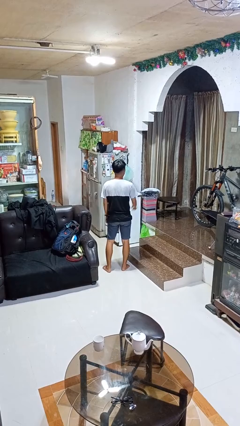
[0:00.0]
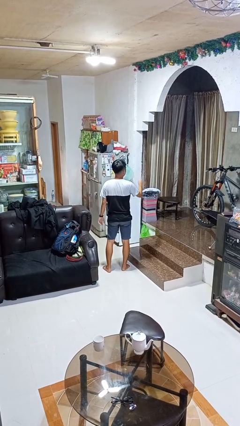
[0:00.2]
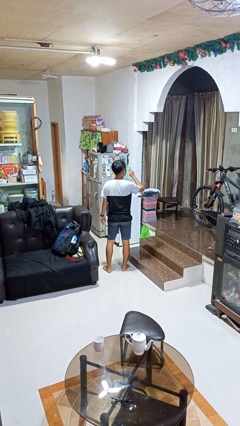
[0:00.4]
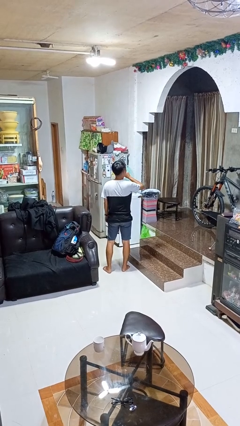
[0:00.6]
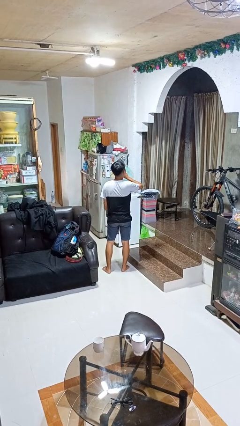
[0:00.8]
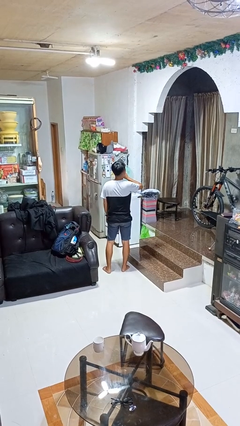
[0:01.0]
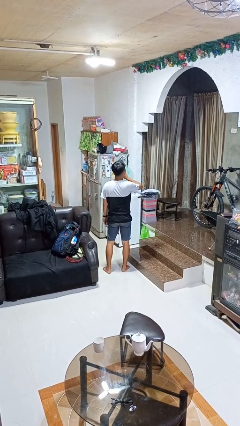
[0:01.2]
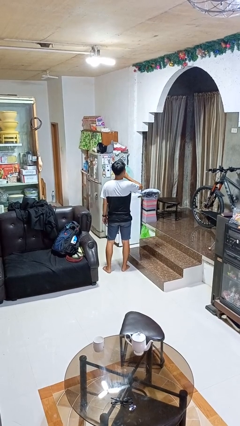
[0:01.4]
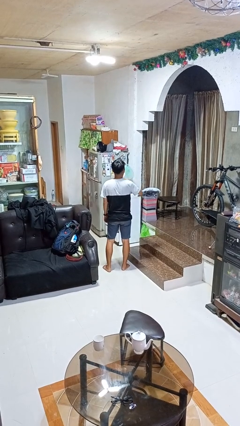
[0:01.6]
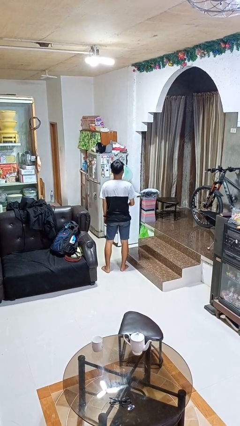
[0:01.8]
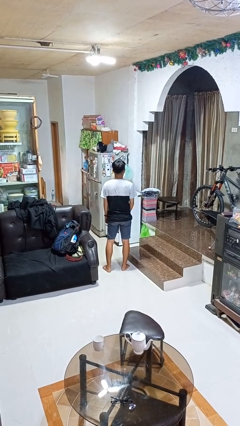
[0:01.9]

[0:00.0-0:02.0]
person gestures be quiet

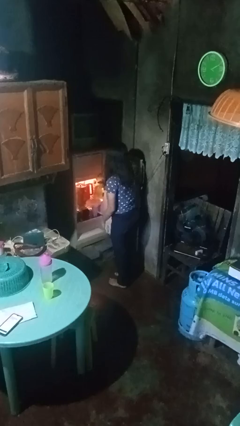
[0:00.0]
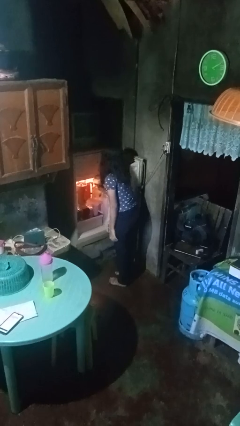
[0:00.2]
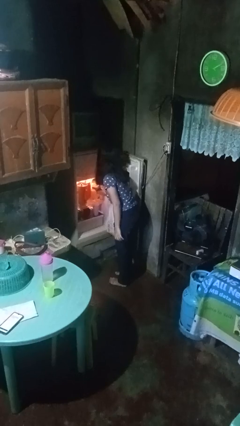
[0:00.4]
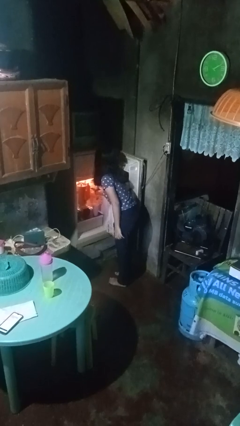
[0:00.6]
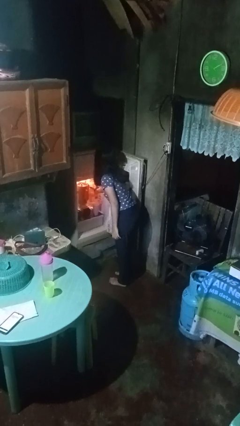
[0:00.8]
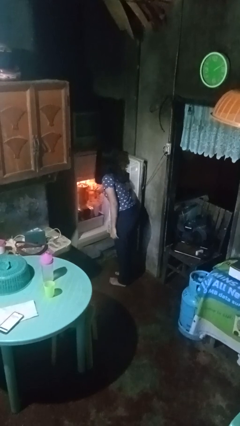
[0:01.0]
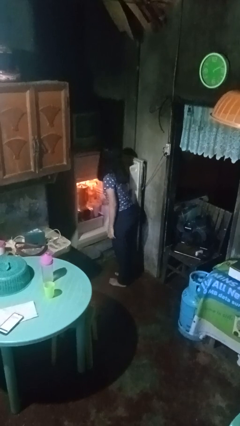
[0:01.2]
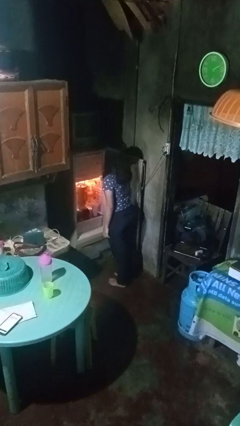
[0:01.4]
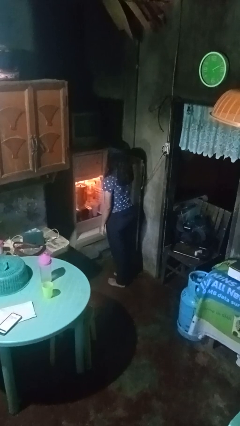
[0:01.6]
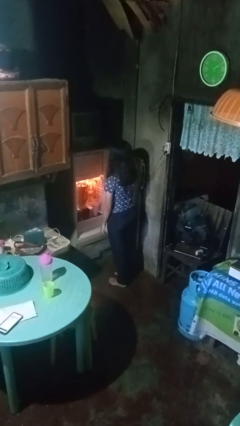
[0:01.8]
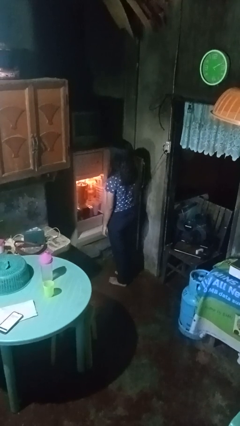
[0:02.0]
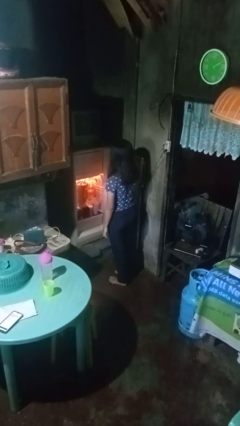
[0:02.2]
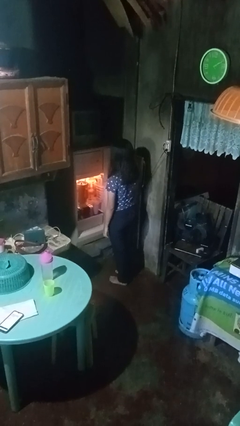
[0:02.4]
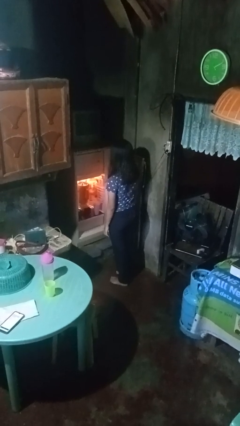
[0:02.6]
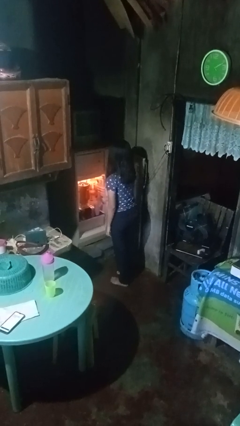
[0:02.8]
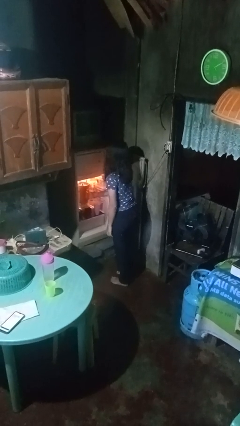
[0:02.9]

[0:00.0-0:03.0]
person puts object into refrigerator

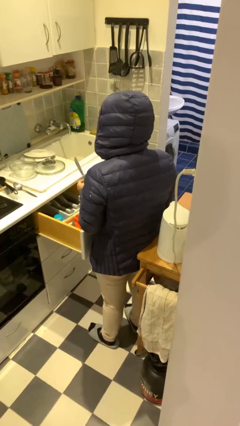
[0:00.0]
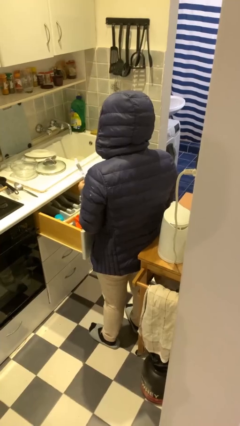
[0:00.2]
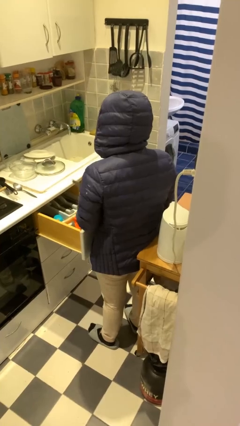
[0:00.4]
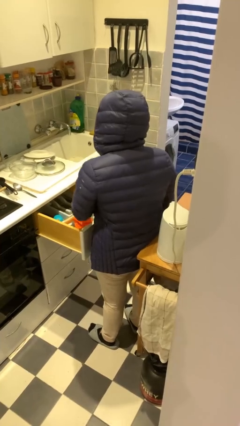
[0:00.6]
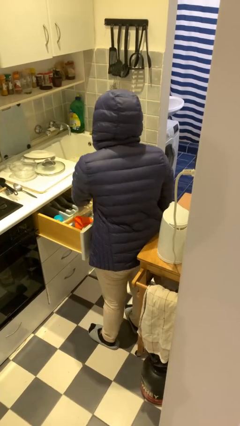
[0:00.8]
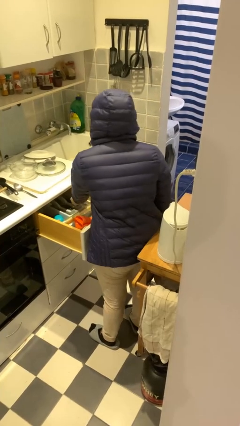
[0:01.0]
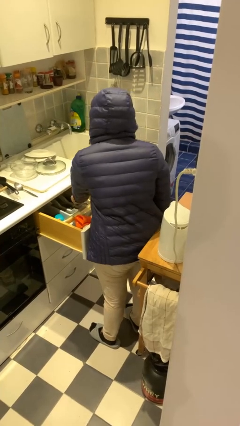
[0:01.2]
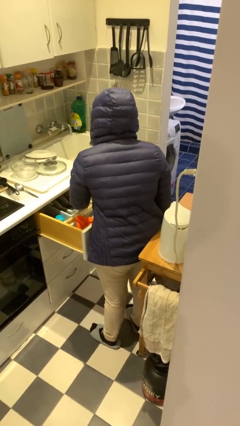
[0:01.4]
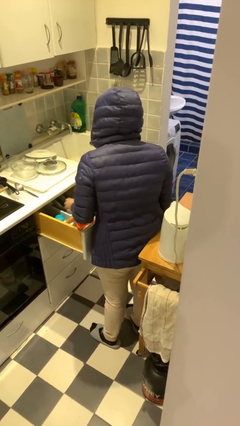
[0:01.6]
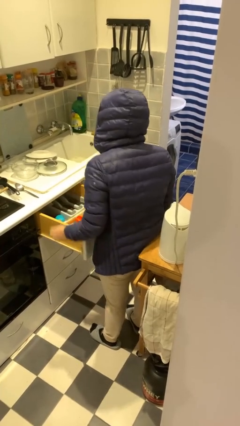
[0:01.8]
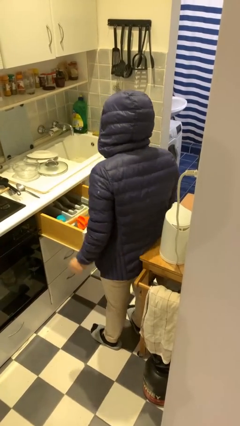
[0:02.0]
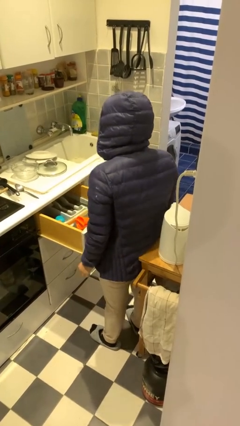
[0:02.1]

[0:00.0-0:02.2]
person puts object into kitchen drawer

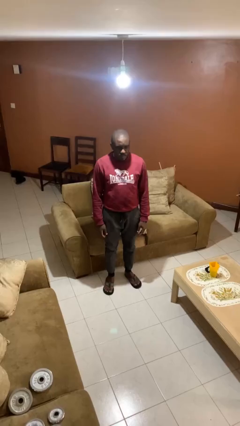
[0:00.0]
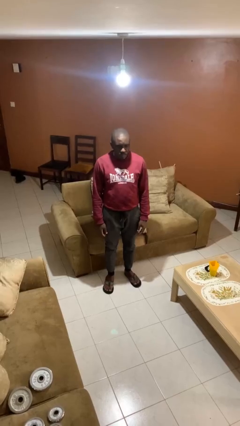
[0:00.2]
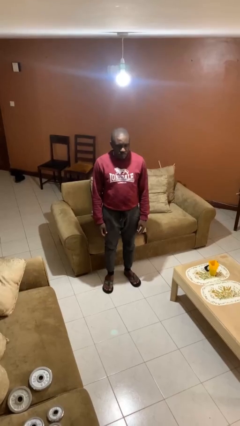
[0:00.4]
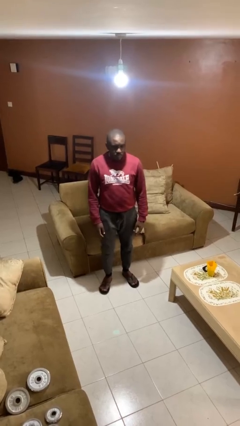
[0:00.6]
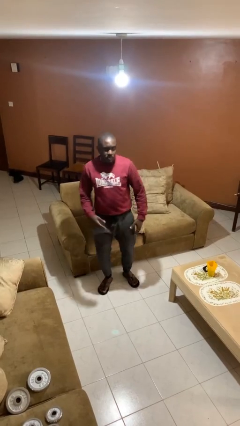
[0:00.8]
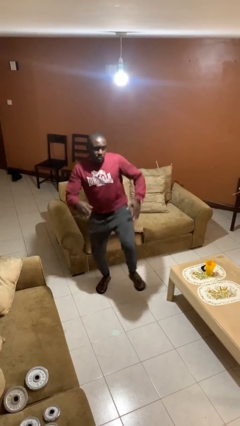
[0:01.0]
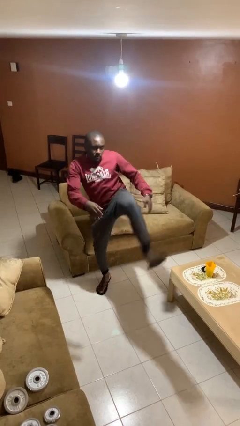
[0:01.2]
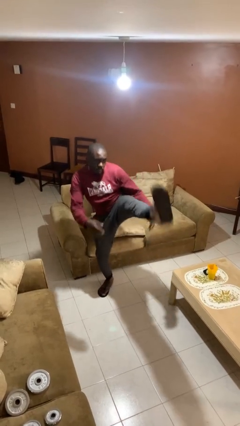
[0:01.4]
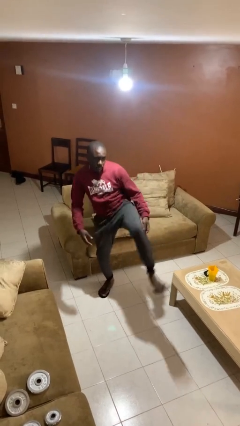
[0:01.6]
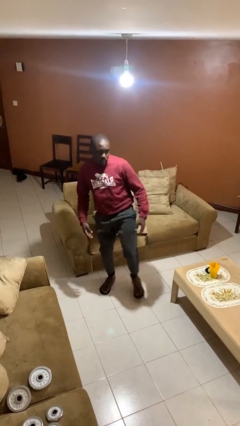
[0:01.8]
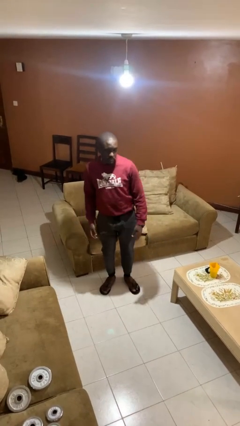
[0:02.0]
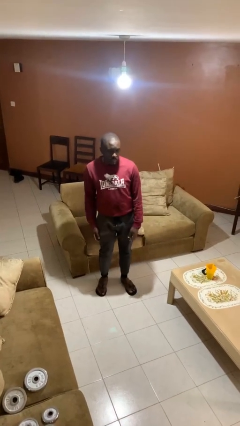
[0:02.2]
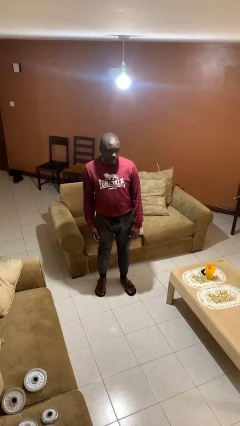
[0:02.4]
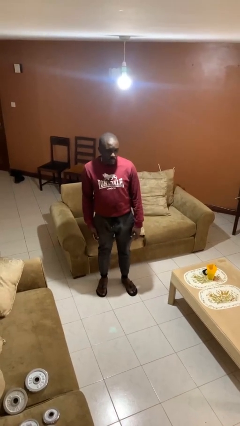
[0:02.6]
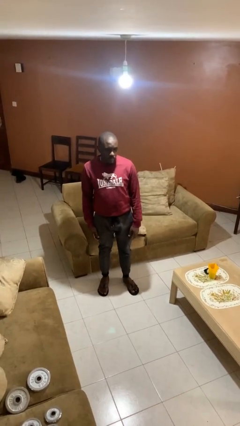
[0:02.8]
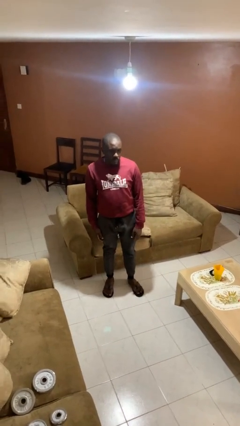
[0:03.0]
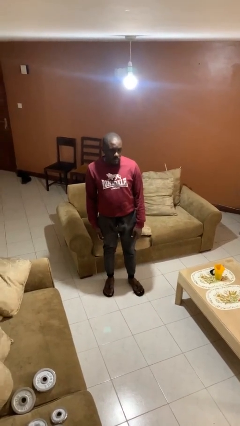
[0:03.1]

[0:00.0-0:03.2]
person karate kicks

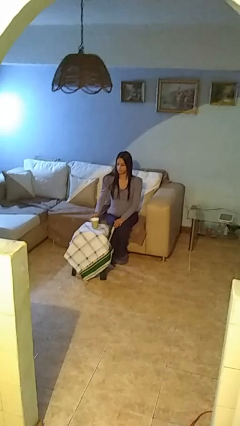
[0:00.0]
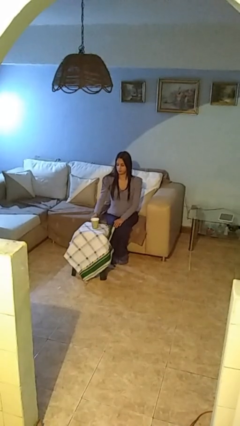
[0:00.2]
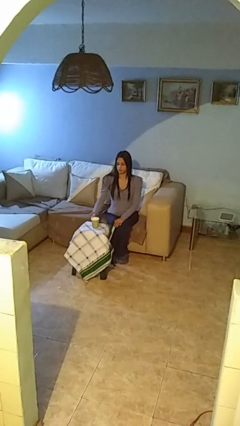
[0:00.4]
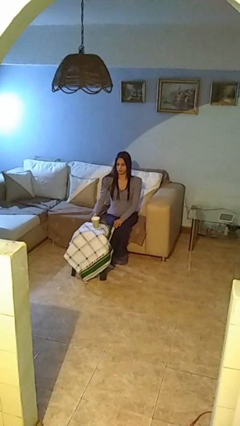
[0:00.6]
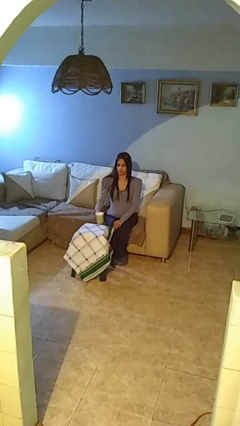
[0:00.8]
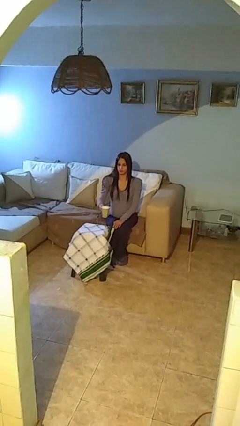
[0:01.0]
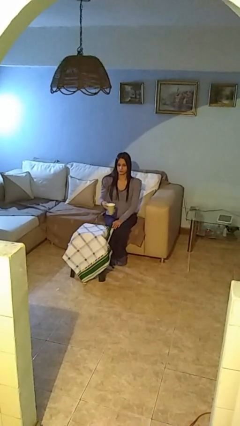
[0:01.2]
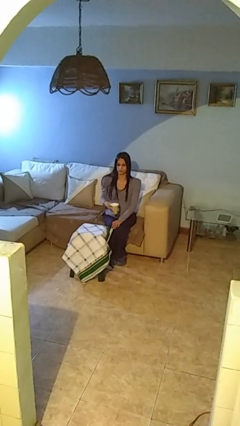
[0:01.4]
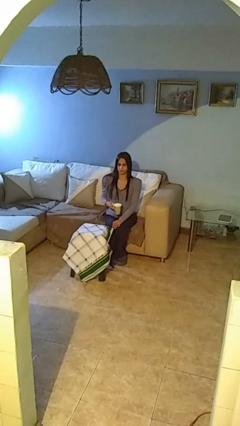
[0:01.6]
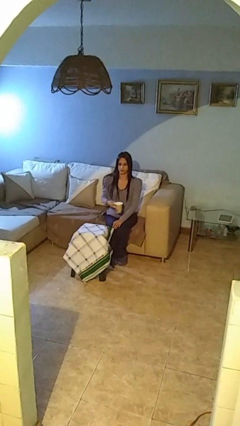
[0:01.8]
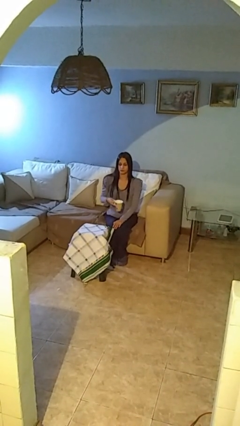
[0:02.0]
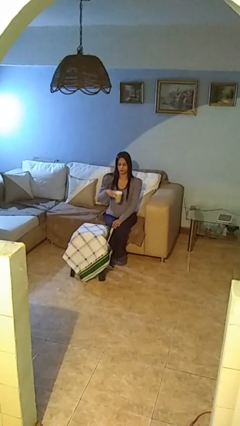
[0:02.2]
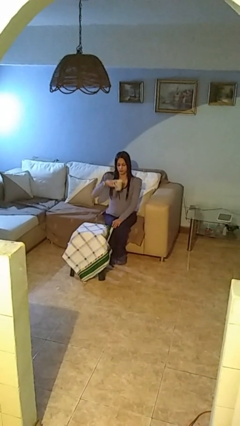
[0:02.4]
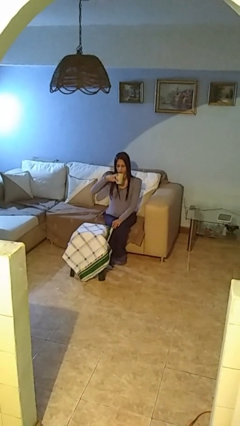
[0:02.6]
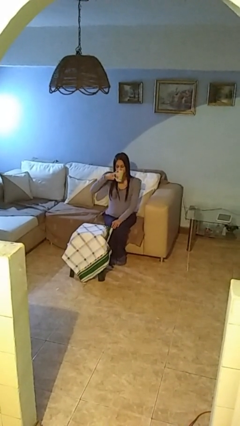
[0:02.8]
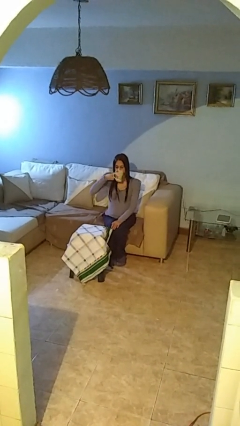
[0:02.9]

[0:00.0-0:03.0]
person picks up object from table

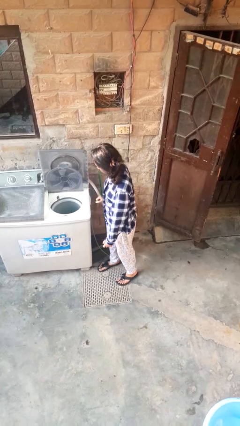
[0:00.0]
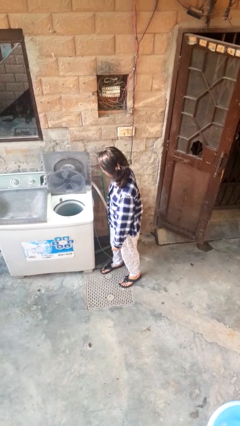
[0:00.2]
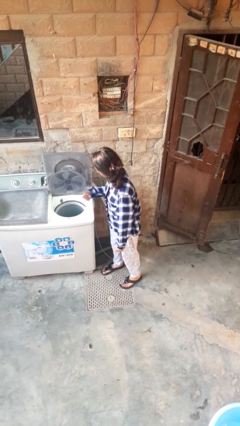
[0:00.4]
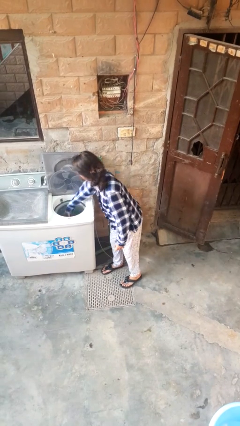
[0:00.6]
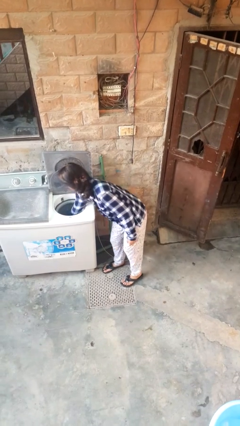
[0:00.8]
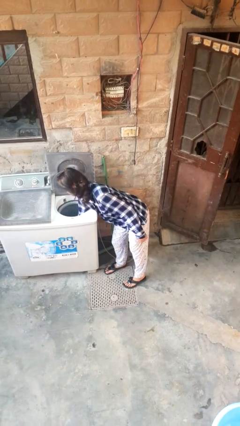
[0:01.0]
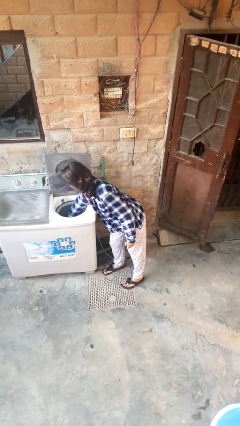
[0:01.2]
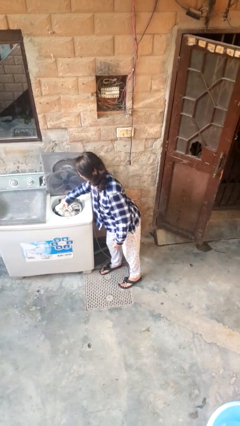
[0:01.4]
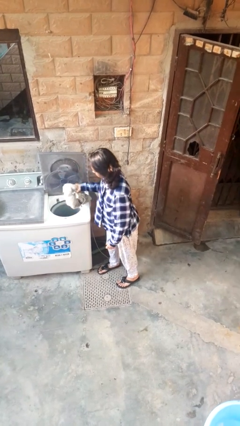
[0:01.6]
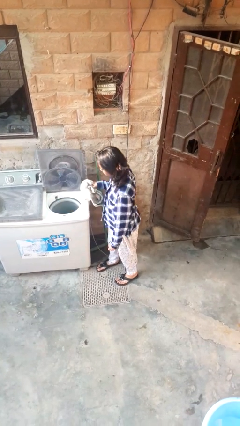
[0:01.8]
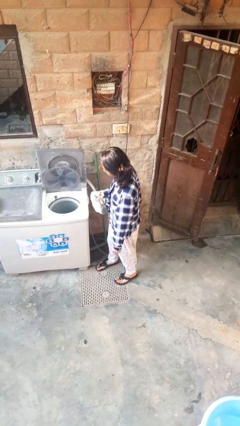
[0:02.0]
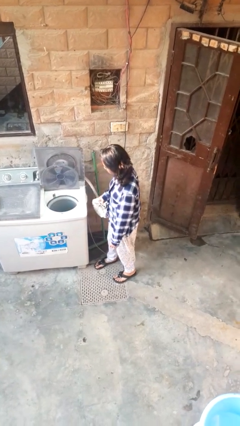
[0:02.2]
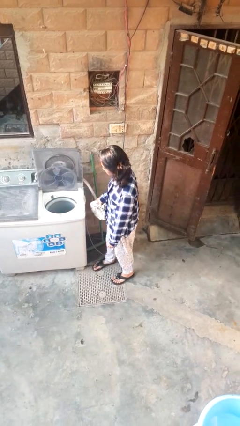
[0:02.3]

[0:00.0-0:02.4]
person unloads dryer

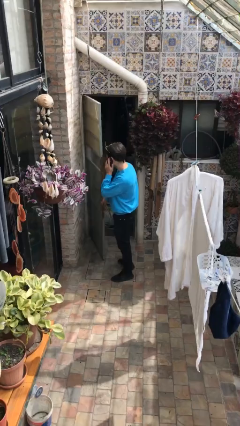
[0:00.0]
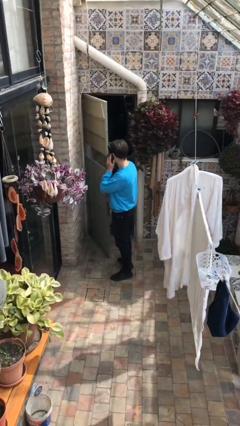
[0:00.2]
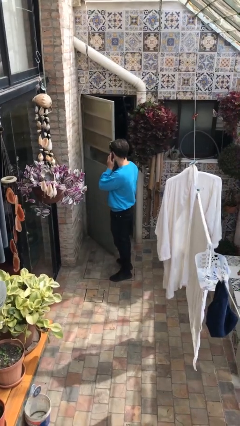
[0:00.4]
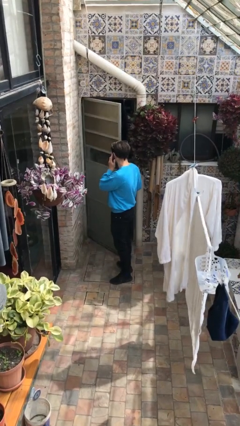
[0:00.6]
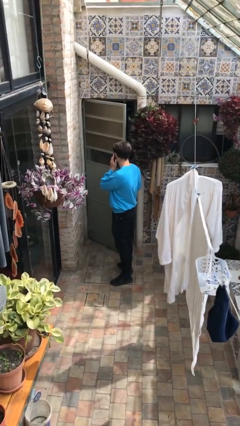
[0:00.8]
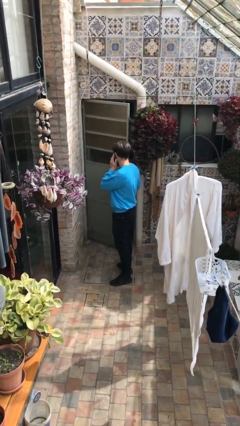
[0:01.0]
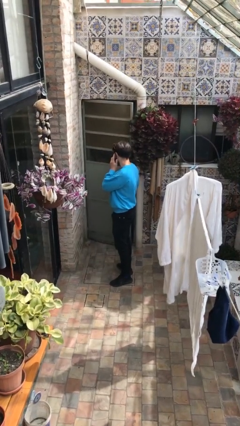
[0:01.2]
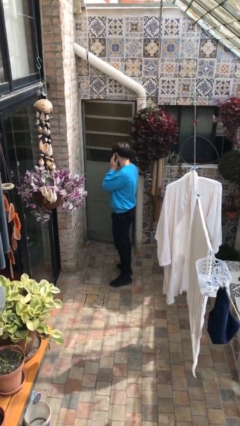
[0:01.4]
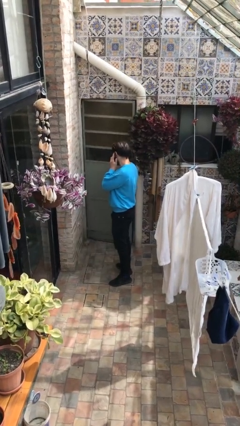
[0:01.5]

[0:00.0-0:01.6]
person closes facility door
